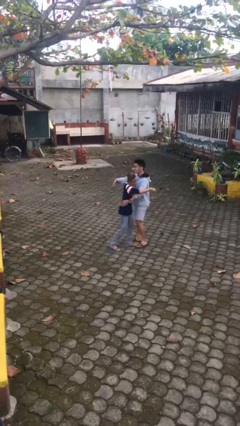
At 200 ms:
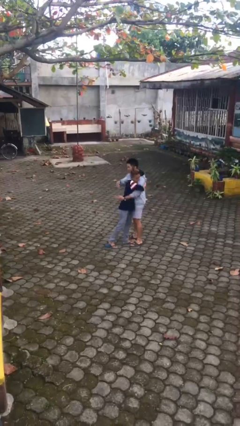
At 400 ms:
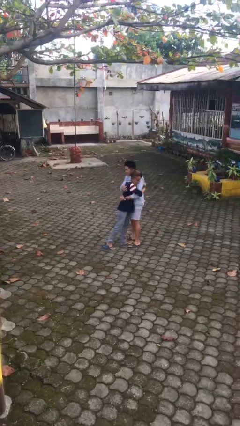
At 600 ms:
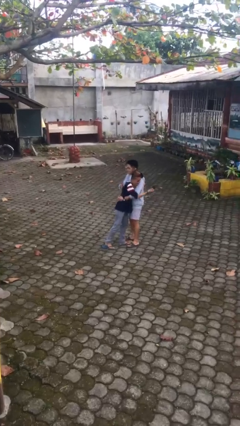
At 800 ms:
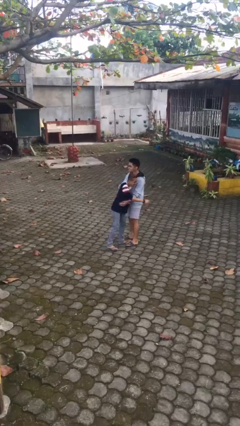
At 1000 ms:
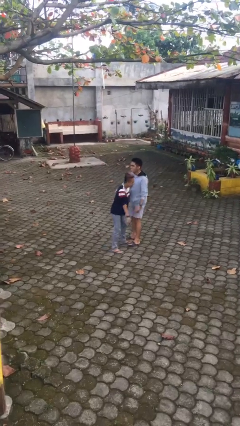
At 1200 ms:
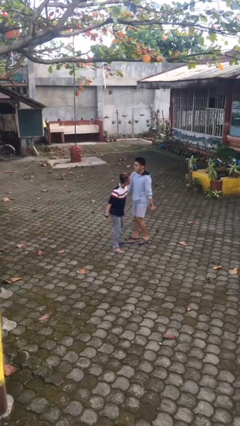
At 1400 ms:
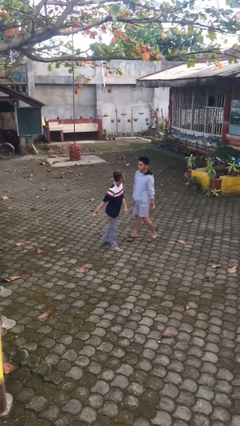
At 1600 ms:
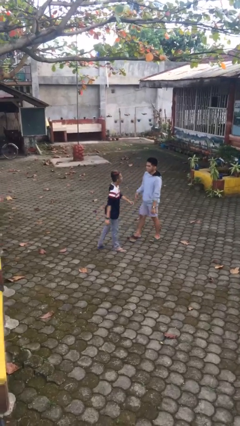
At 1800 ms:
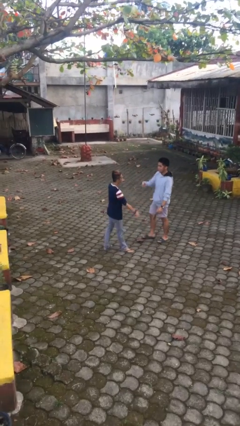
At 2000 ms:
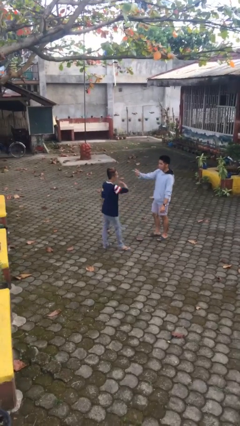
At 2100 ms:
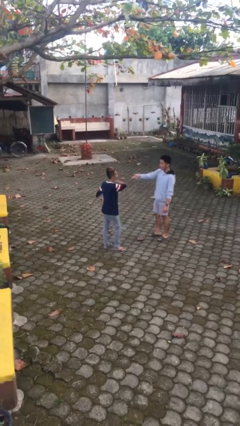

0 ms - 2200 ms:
person embraces person

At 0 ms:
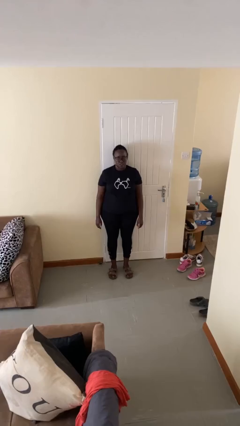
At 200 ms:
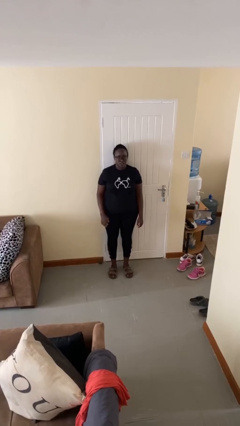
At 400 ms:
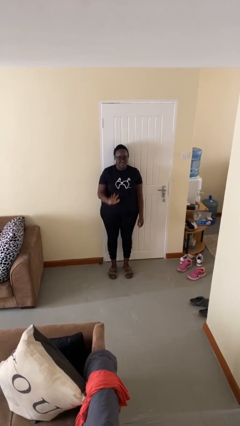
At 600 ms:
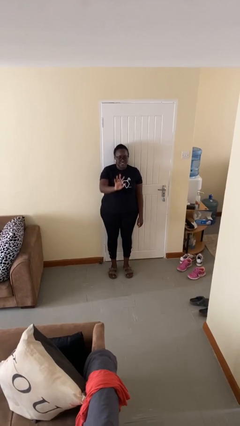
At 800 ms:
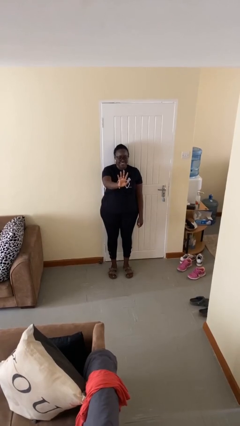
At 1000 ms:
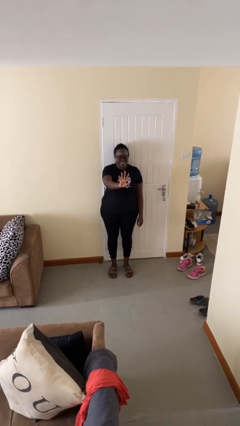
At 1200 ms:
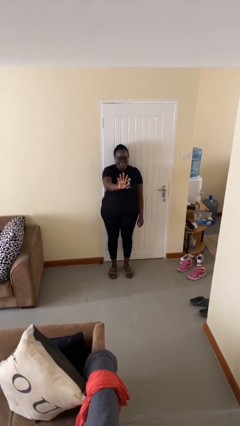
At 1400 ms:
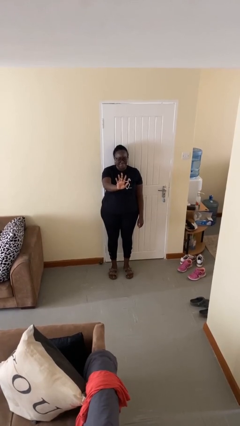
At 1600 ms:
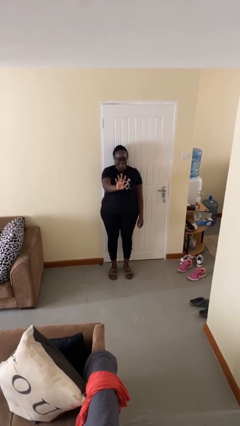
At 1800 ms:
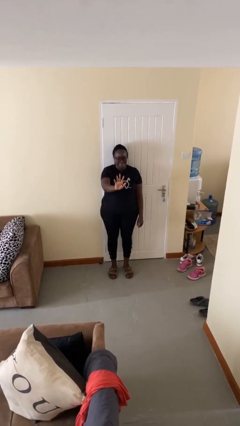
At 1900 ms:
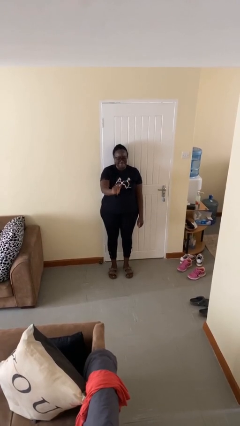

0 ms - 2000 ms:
person gestures number five

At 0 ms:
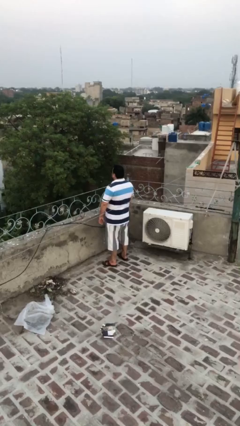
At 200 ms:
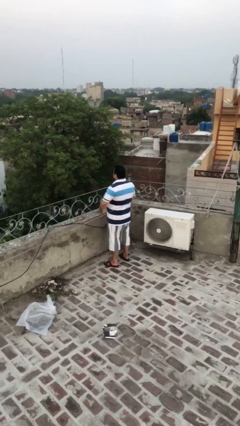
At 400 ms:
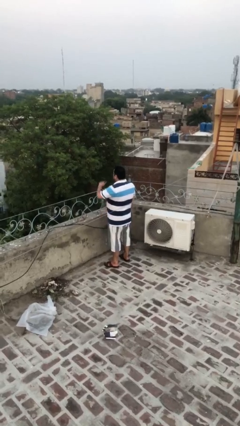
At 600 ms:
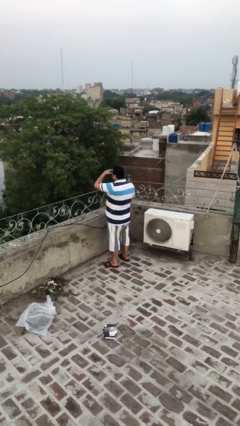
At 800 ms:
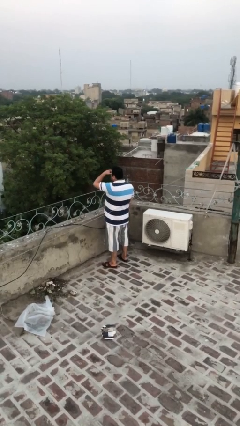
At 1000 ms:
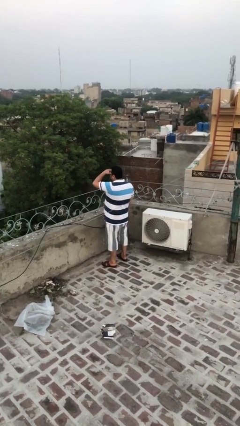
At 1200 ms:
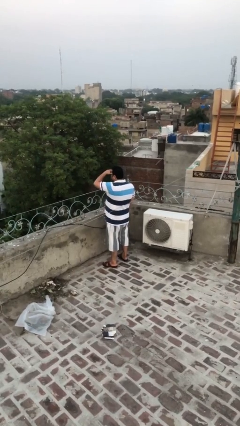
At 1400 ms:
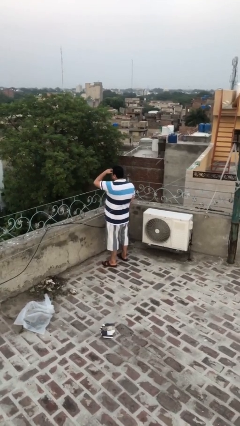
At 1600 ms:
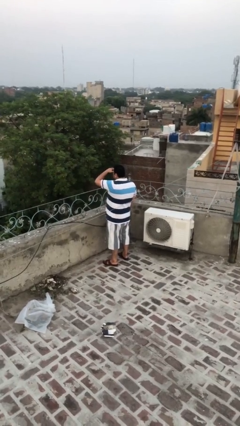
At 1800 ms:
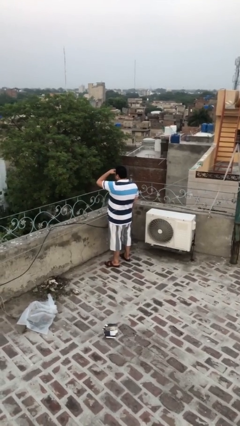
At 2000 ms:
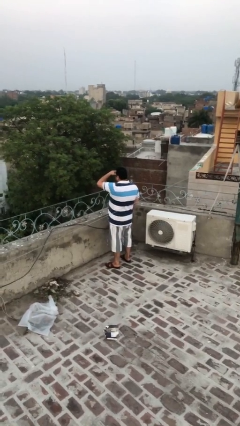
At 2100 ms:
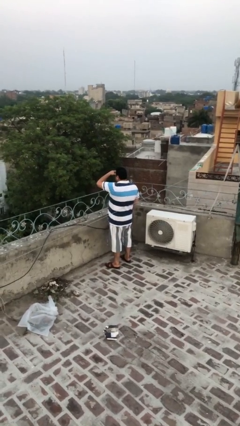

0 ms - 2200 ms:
person shades eyes

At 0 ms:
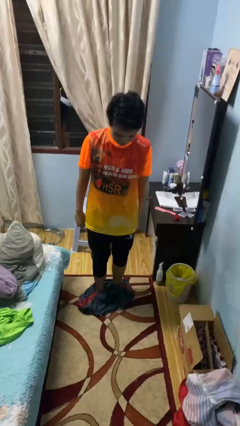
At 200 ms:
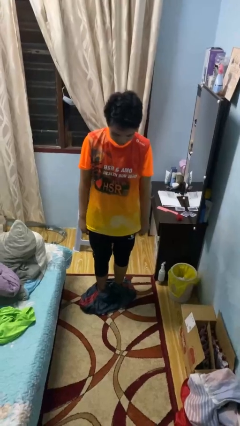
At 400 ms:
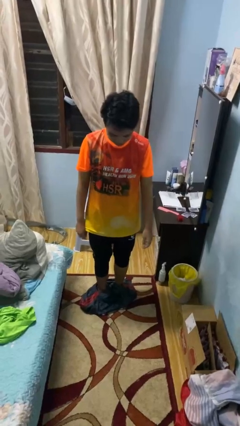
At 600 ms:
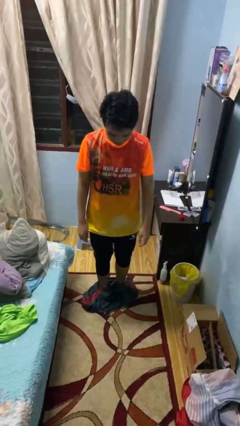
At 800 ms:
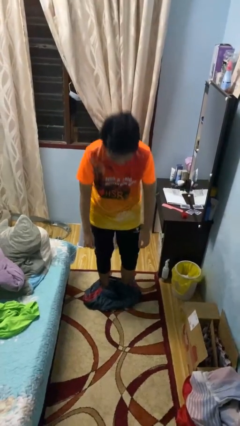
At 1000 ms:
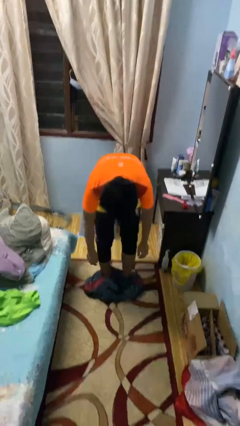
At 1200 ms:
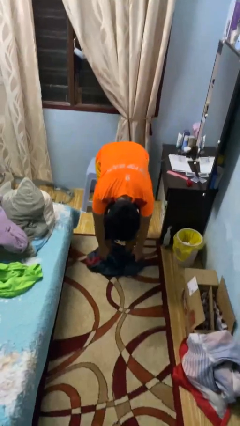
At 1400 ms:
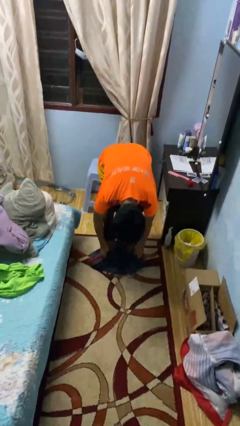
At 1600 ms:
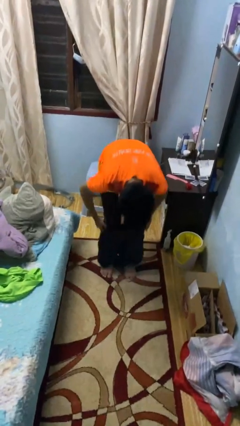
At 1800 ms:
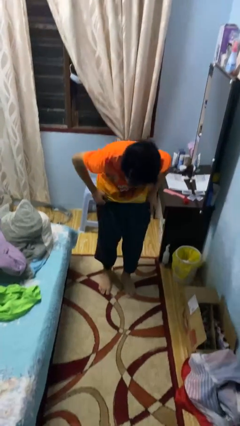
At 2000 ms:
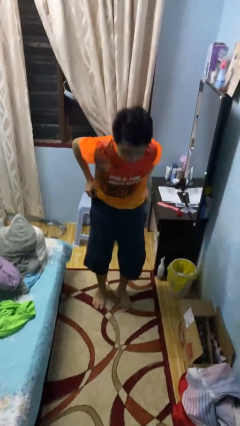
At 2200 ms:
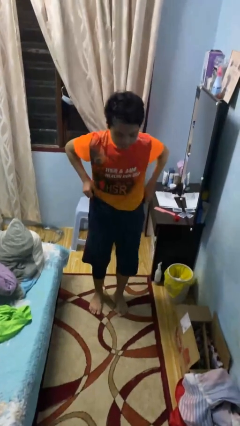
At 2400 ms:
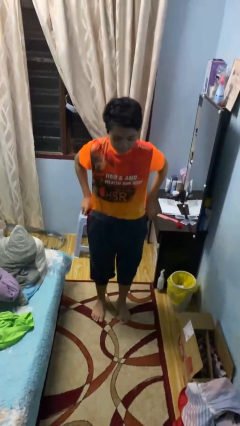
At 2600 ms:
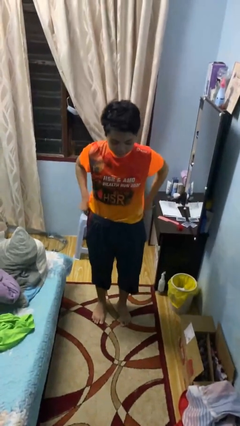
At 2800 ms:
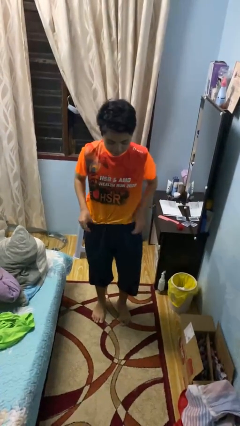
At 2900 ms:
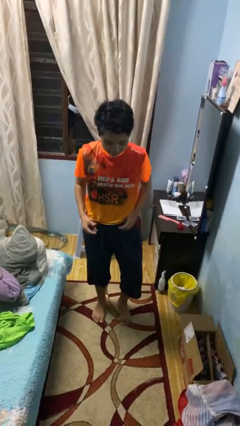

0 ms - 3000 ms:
person puts on pants

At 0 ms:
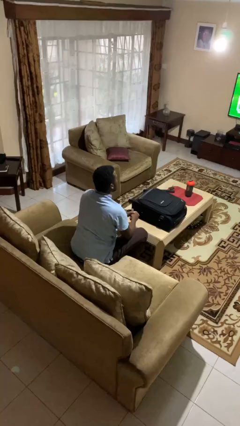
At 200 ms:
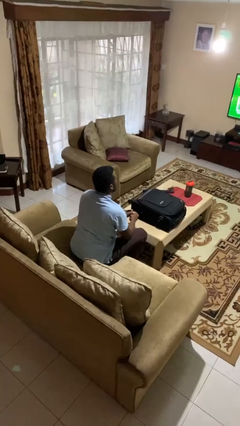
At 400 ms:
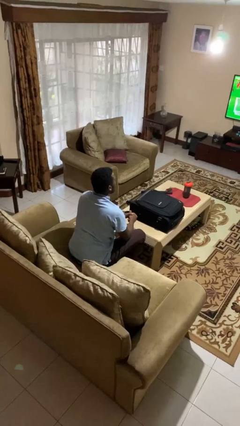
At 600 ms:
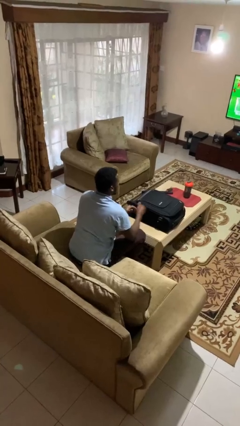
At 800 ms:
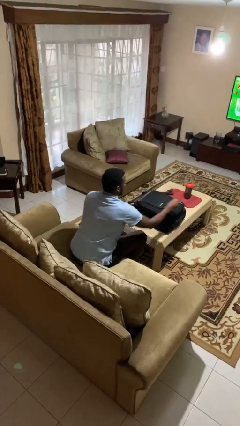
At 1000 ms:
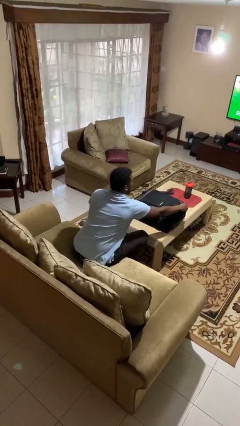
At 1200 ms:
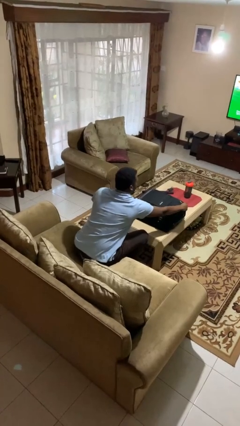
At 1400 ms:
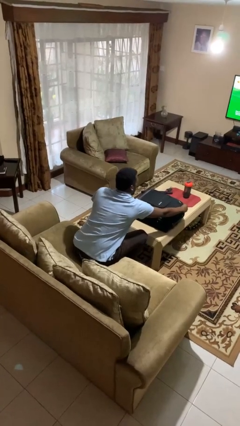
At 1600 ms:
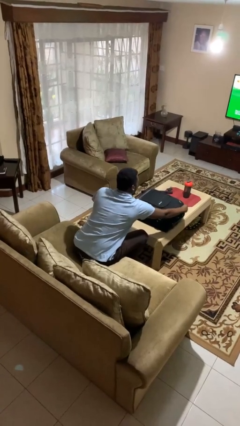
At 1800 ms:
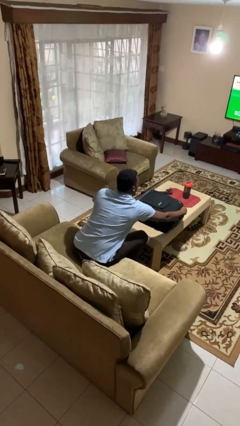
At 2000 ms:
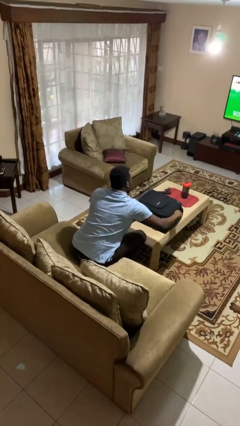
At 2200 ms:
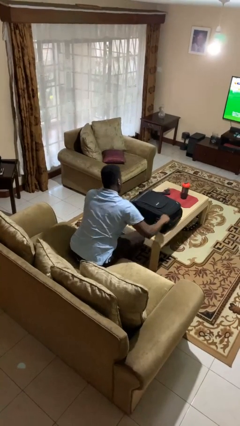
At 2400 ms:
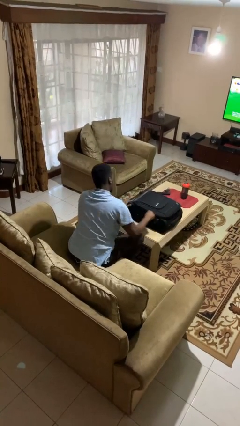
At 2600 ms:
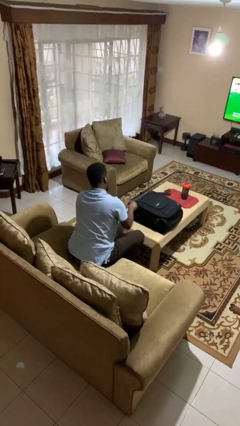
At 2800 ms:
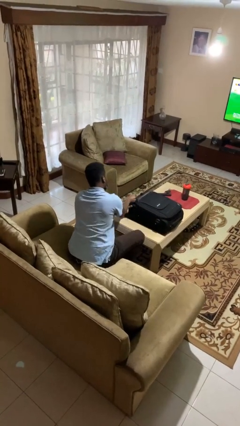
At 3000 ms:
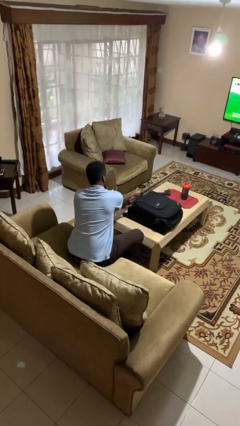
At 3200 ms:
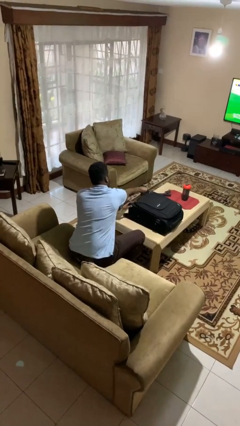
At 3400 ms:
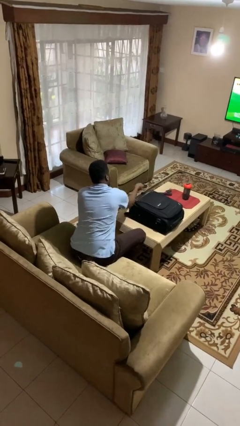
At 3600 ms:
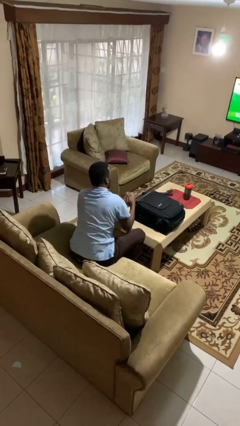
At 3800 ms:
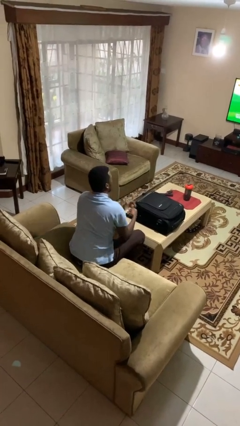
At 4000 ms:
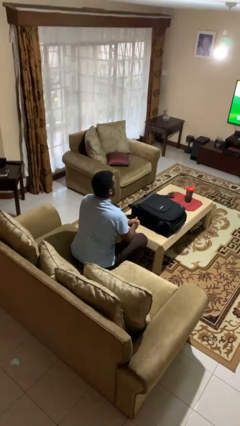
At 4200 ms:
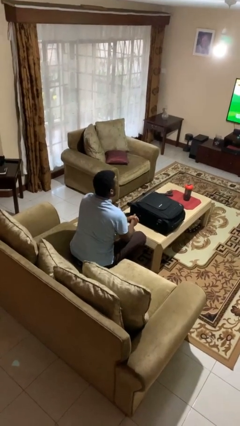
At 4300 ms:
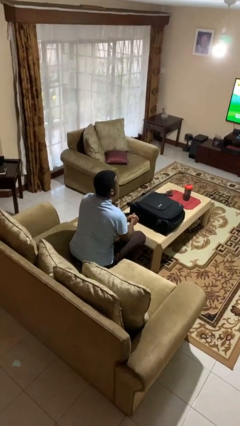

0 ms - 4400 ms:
person opens suitcase

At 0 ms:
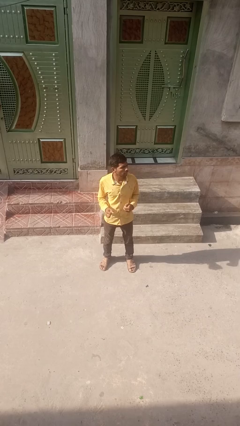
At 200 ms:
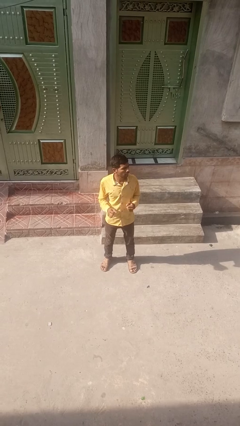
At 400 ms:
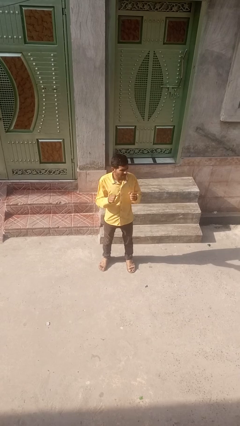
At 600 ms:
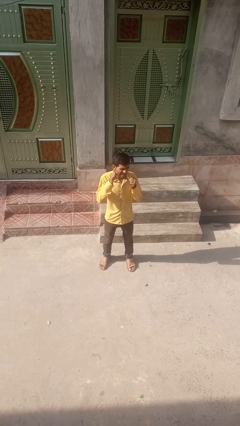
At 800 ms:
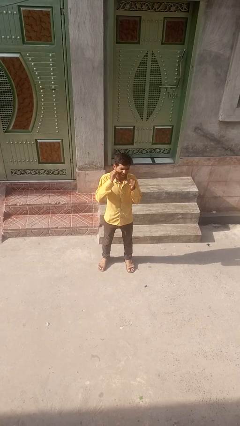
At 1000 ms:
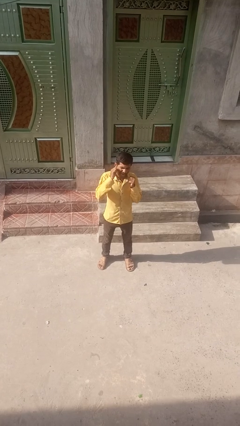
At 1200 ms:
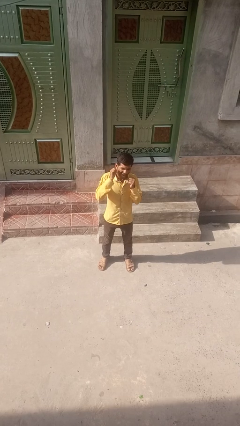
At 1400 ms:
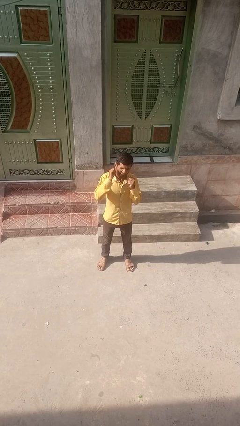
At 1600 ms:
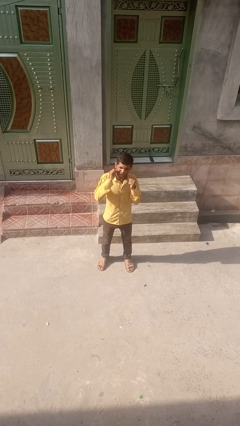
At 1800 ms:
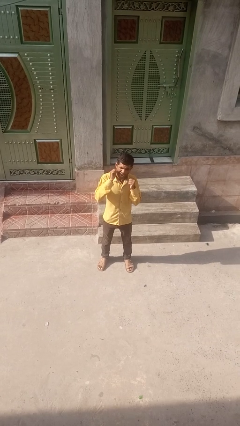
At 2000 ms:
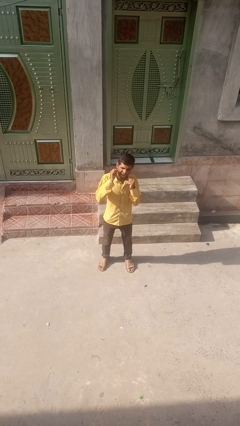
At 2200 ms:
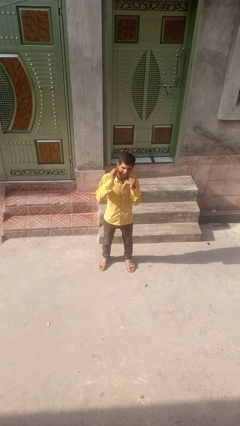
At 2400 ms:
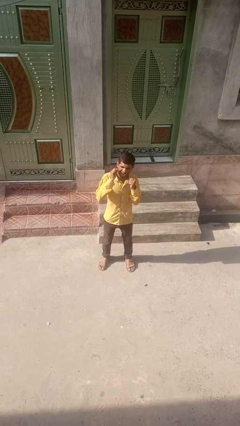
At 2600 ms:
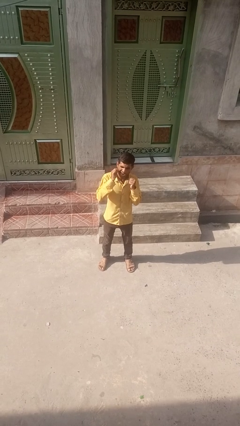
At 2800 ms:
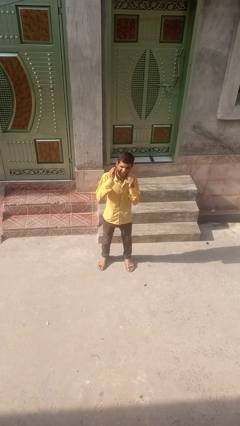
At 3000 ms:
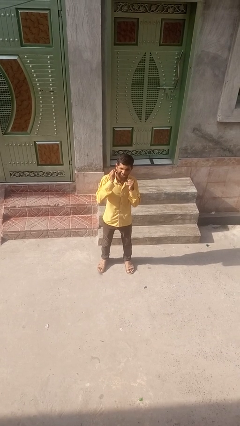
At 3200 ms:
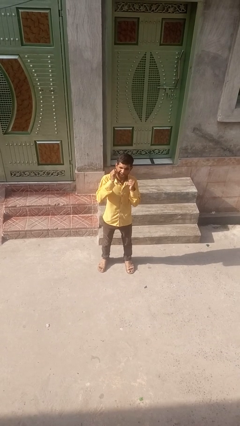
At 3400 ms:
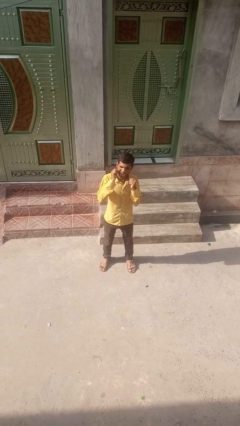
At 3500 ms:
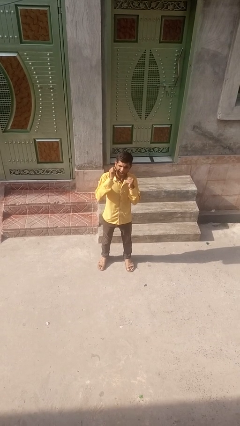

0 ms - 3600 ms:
person flosses
